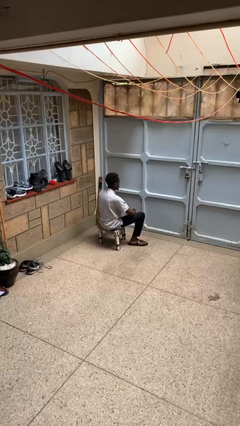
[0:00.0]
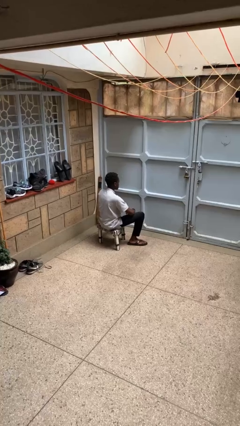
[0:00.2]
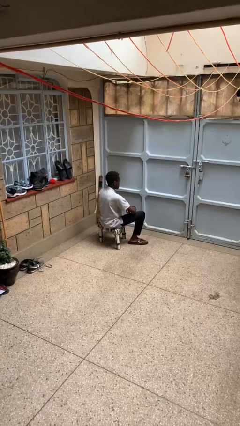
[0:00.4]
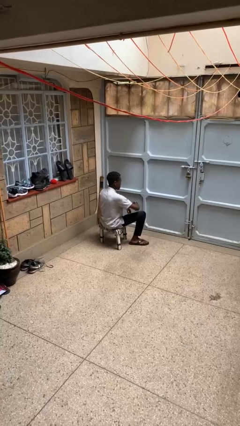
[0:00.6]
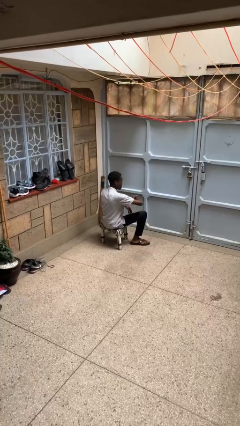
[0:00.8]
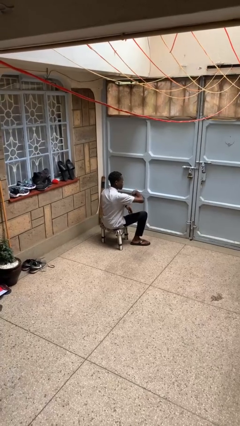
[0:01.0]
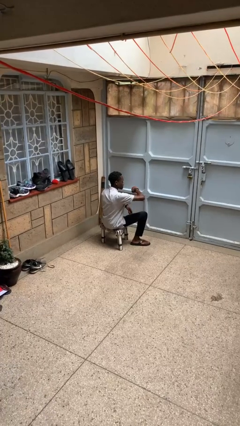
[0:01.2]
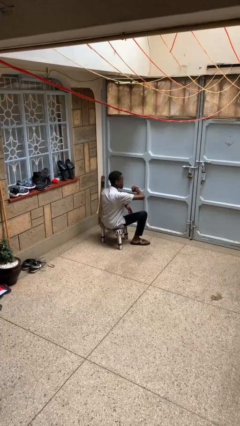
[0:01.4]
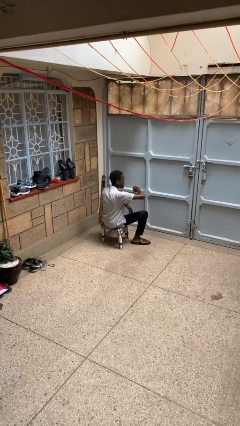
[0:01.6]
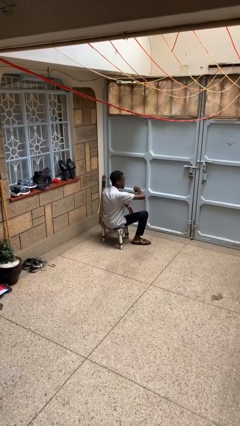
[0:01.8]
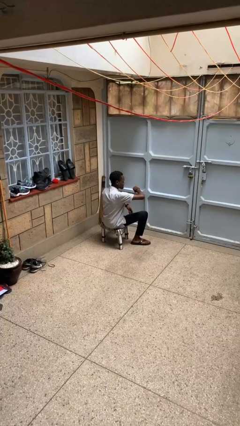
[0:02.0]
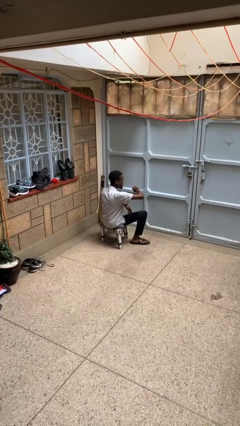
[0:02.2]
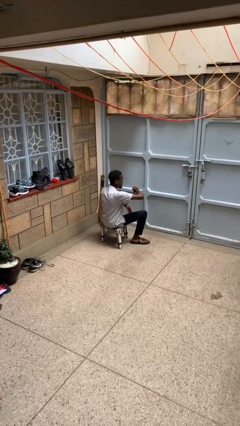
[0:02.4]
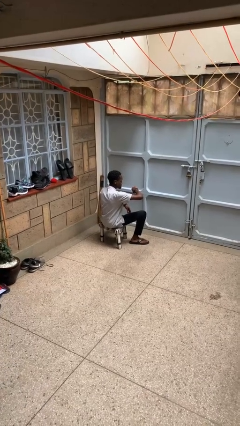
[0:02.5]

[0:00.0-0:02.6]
person looks at wristwatch

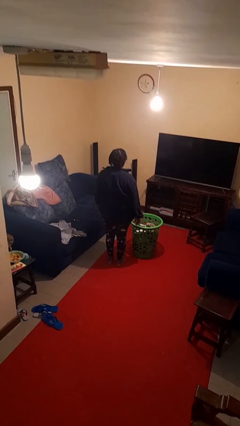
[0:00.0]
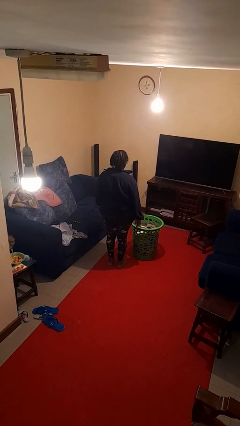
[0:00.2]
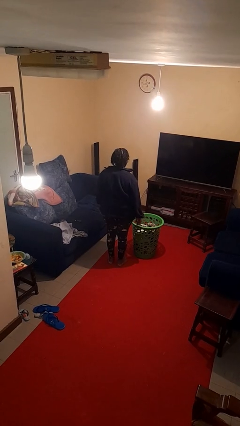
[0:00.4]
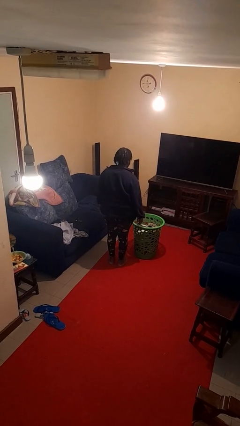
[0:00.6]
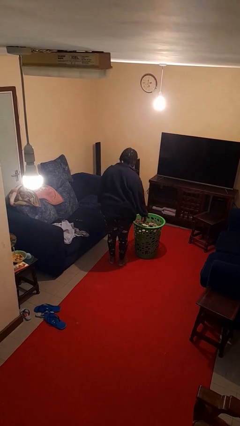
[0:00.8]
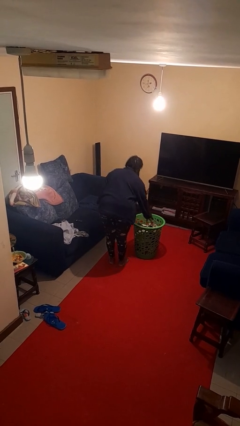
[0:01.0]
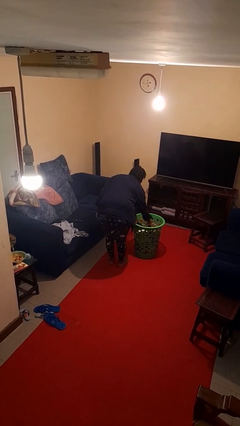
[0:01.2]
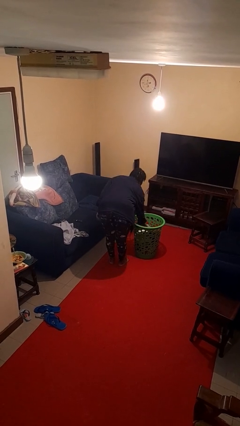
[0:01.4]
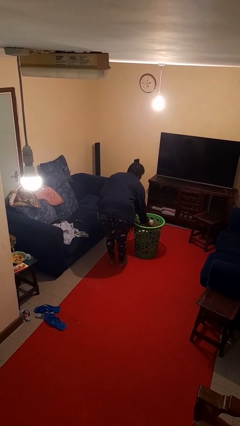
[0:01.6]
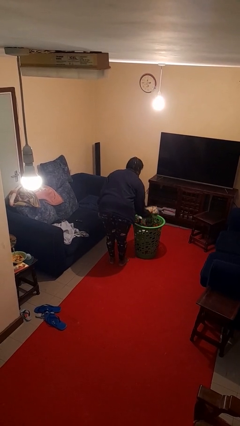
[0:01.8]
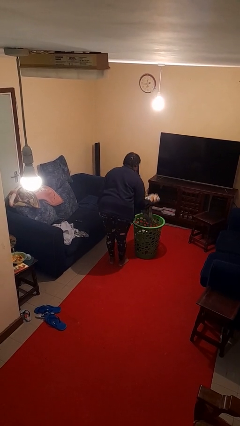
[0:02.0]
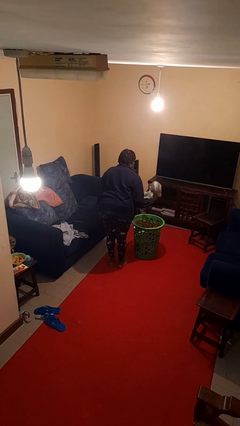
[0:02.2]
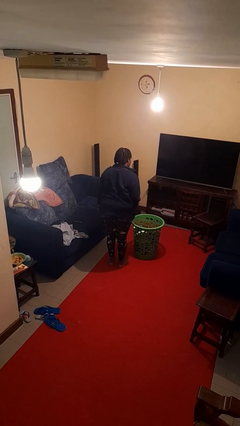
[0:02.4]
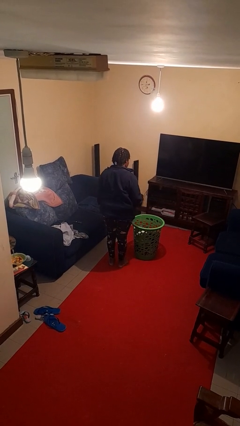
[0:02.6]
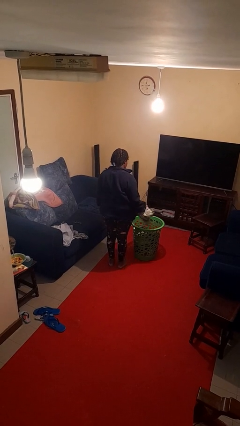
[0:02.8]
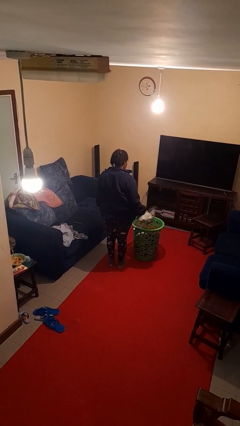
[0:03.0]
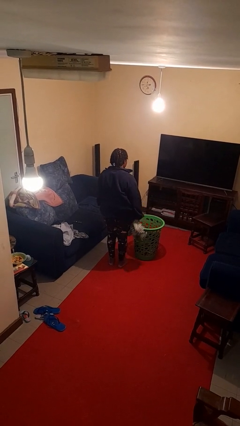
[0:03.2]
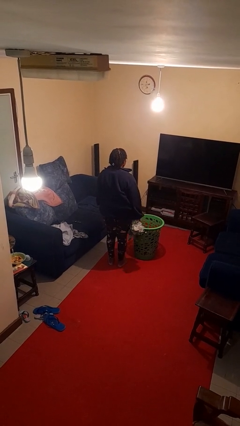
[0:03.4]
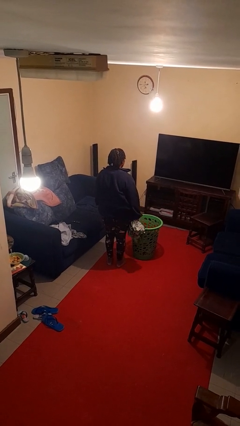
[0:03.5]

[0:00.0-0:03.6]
person takes object from basket

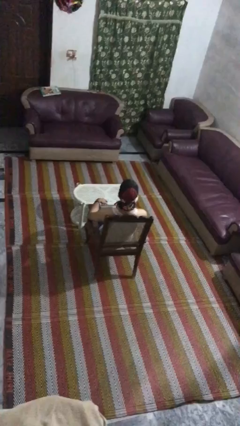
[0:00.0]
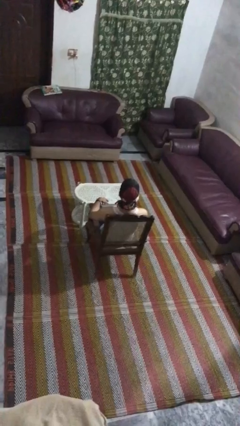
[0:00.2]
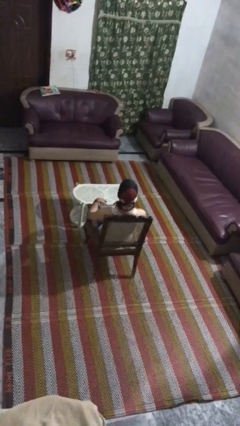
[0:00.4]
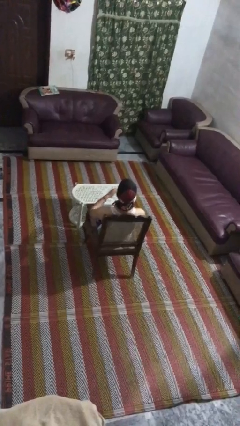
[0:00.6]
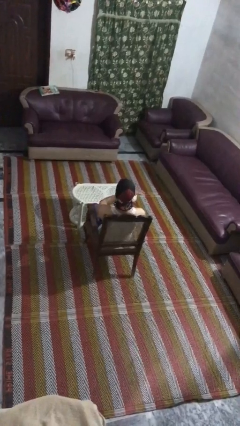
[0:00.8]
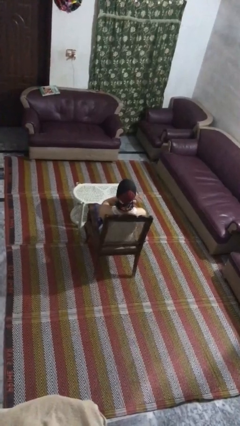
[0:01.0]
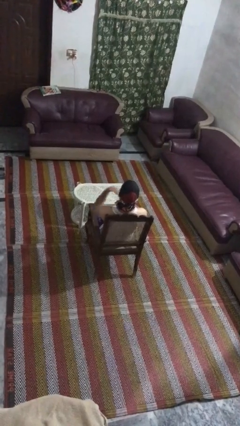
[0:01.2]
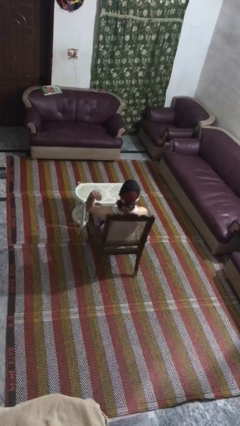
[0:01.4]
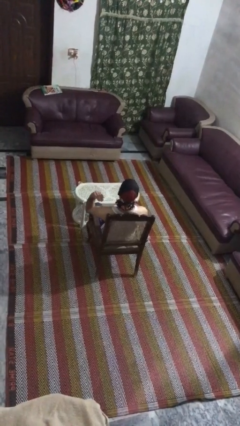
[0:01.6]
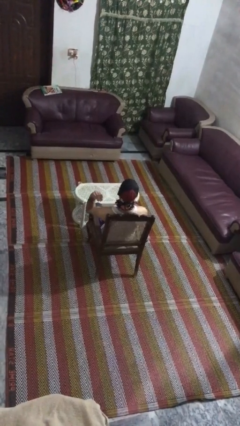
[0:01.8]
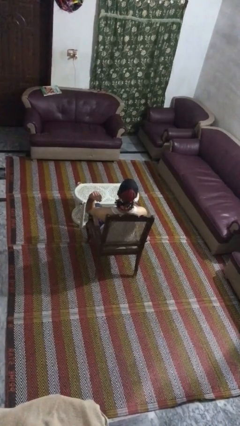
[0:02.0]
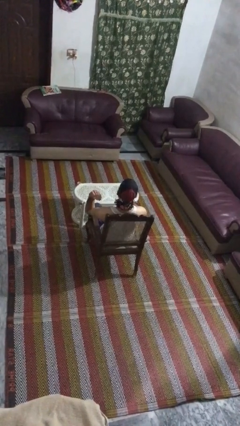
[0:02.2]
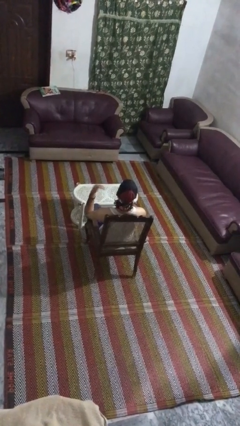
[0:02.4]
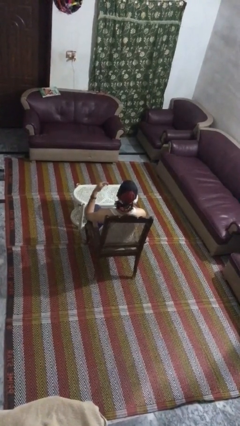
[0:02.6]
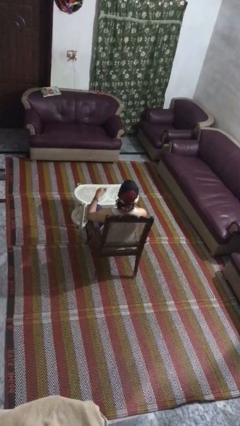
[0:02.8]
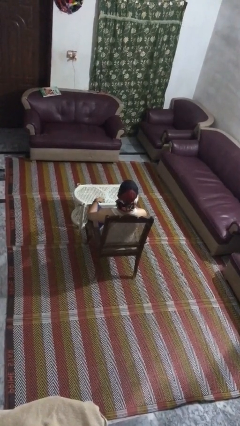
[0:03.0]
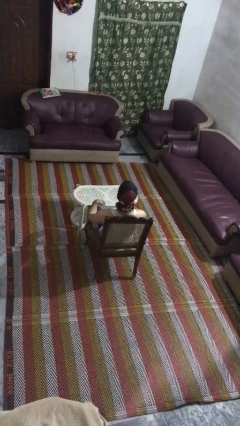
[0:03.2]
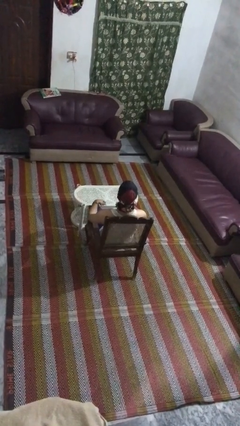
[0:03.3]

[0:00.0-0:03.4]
person gestures cut

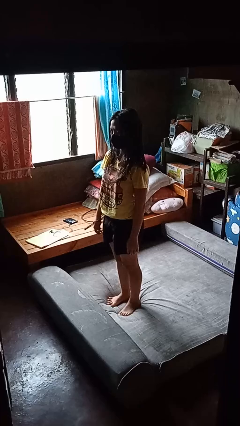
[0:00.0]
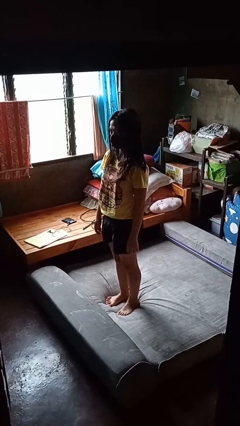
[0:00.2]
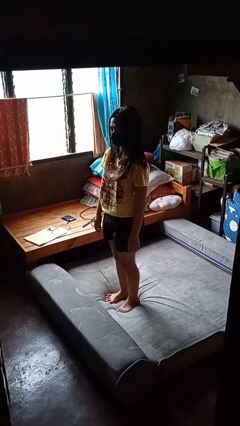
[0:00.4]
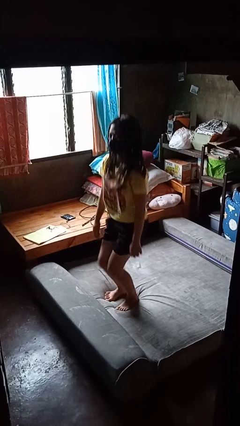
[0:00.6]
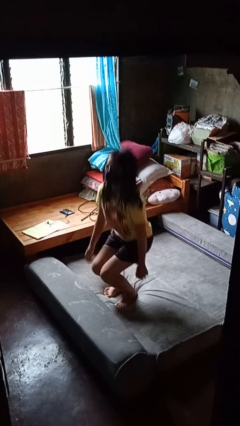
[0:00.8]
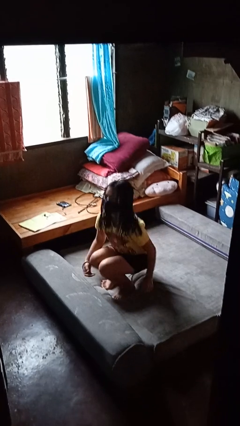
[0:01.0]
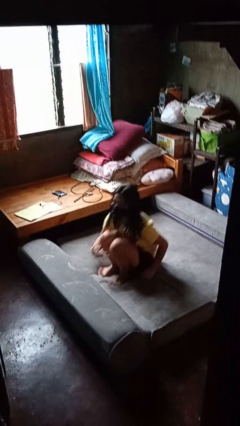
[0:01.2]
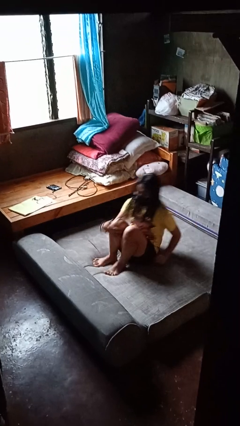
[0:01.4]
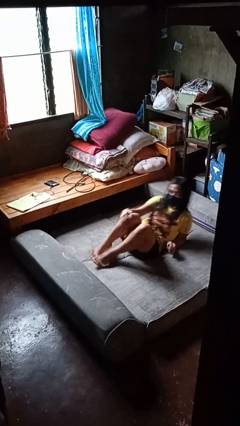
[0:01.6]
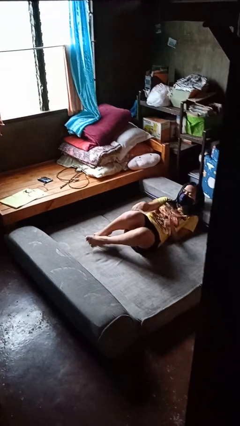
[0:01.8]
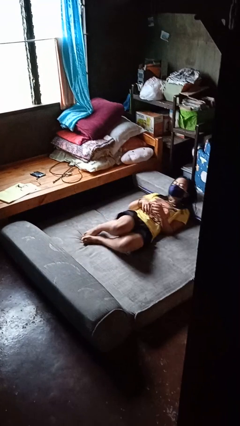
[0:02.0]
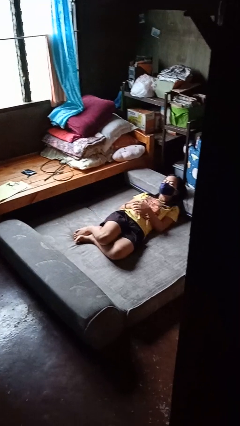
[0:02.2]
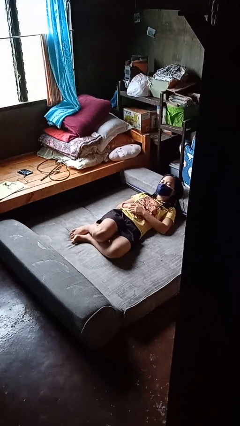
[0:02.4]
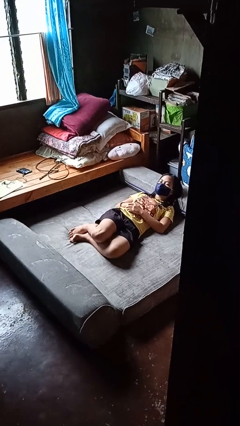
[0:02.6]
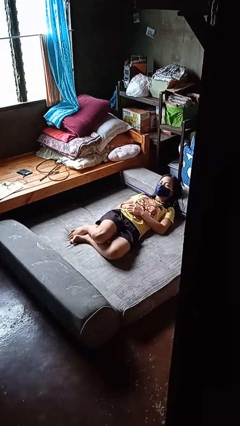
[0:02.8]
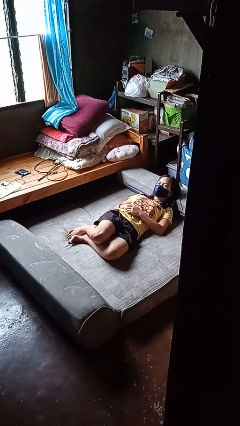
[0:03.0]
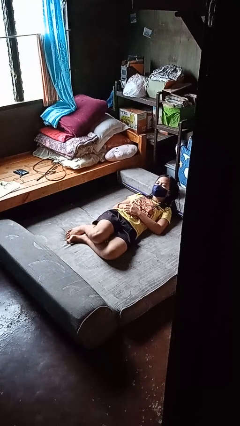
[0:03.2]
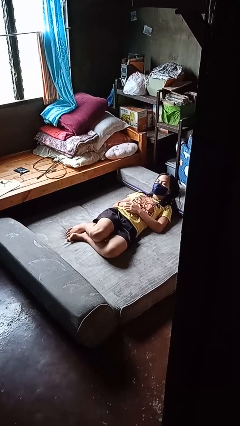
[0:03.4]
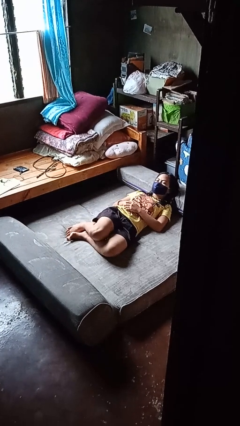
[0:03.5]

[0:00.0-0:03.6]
person lies down on bed

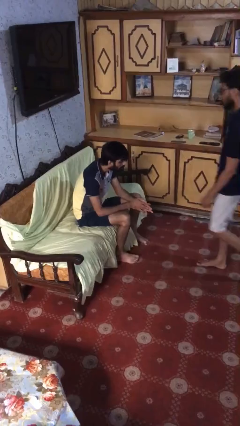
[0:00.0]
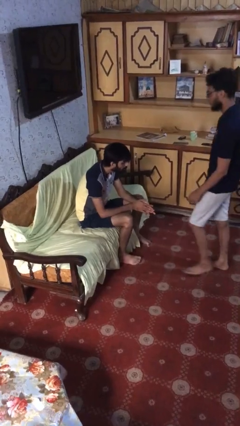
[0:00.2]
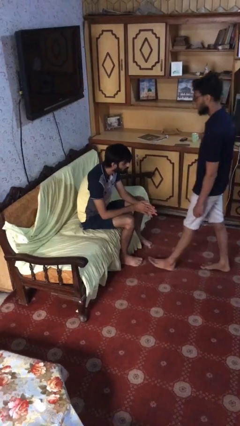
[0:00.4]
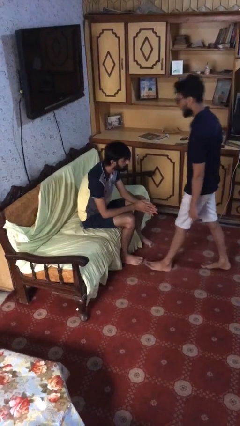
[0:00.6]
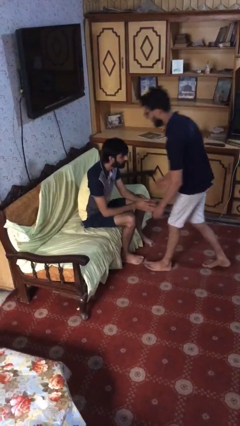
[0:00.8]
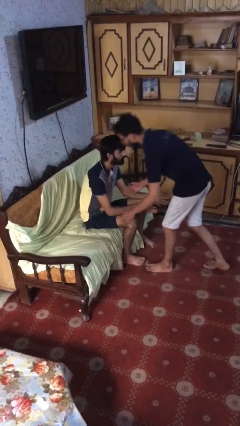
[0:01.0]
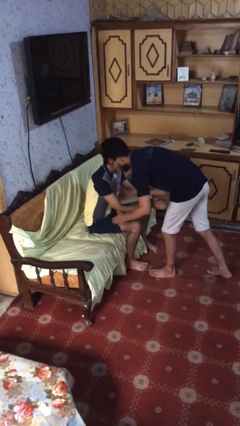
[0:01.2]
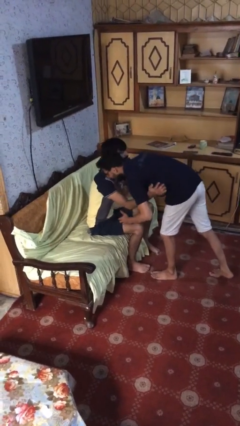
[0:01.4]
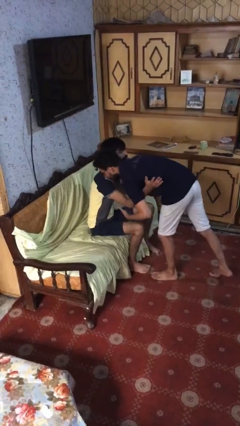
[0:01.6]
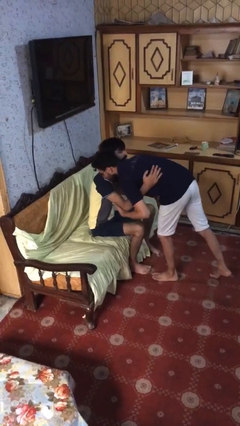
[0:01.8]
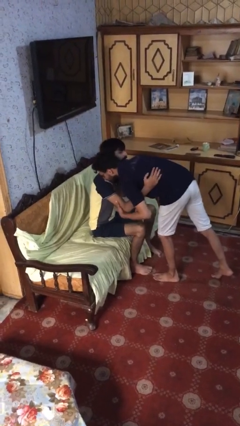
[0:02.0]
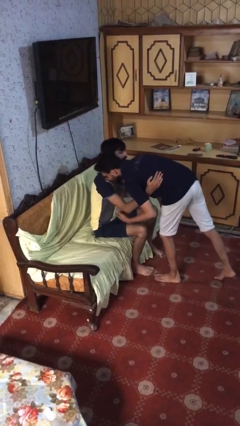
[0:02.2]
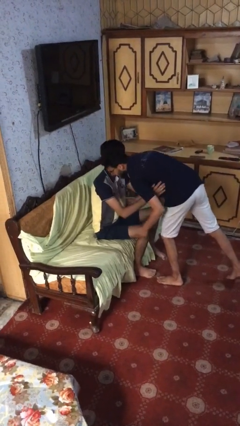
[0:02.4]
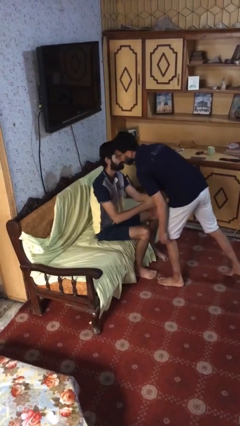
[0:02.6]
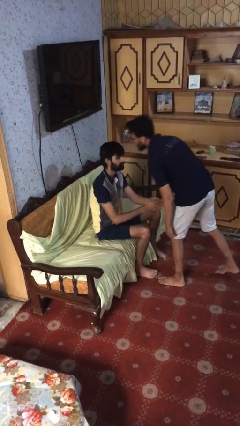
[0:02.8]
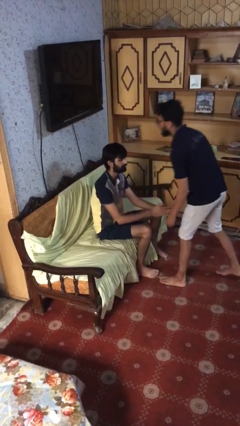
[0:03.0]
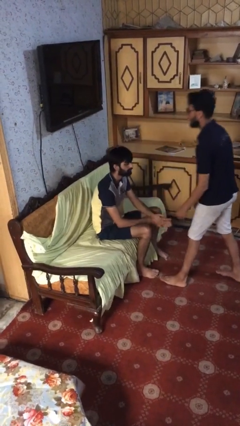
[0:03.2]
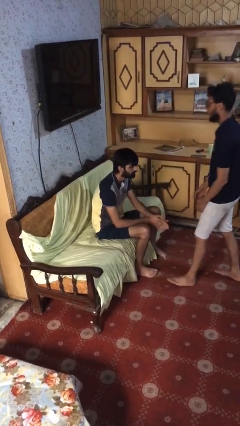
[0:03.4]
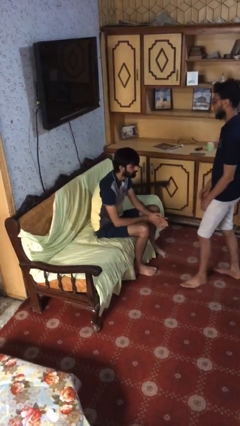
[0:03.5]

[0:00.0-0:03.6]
person embraces person

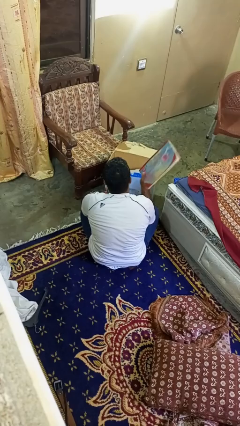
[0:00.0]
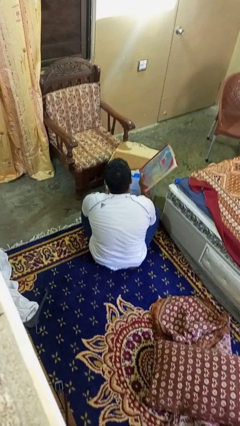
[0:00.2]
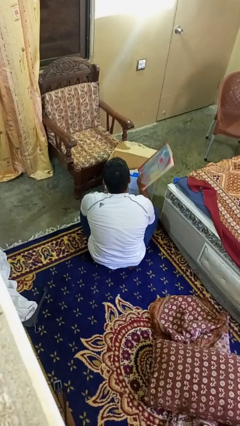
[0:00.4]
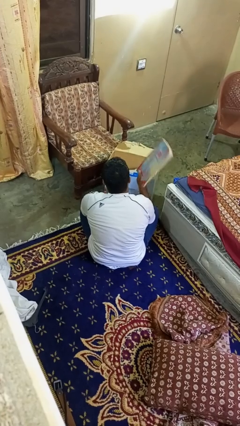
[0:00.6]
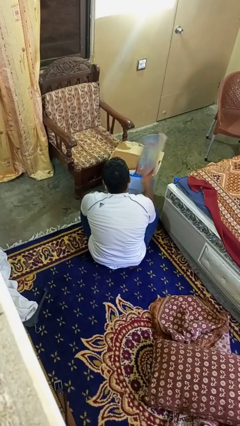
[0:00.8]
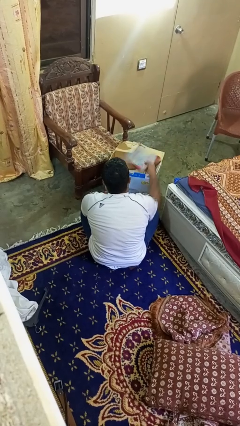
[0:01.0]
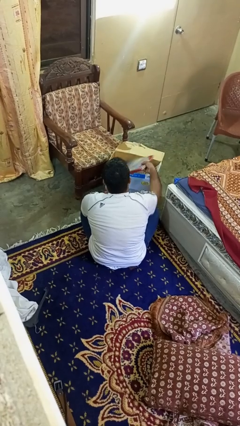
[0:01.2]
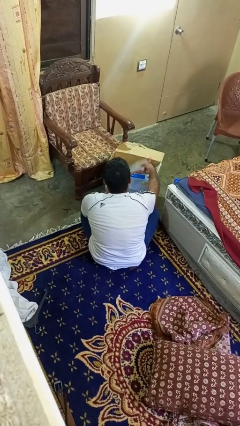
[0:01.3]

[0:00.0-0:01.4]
person puts object into box
